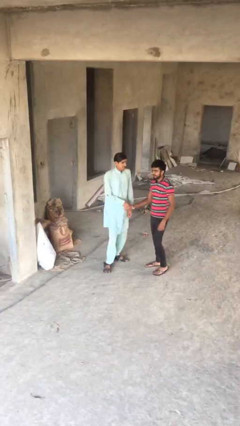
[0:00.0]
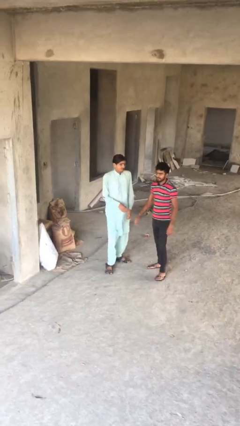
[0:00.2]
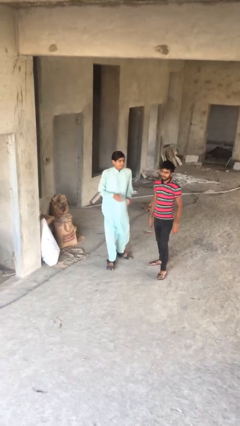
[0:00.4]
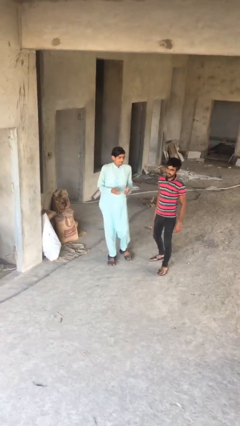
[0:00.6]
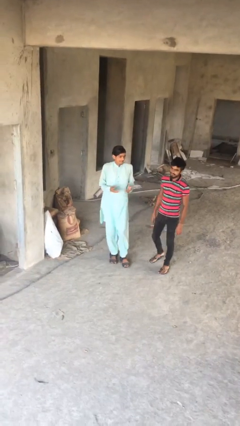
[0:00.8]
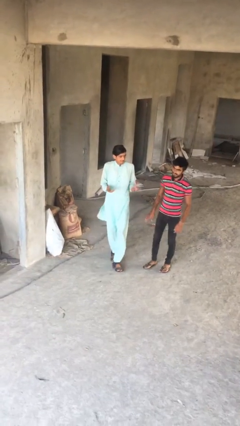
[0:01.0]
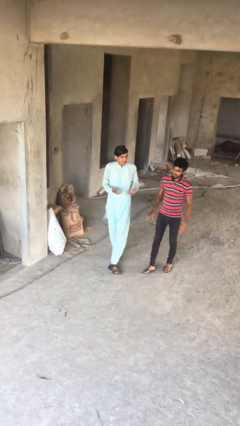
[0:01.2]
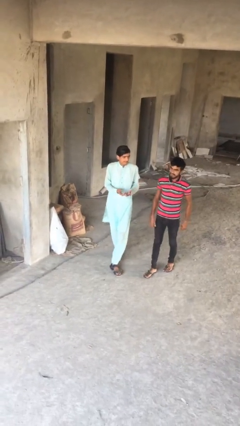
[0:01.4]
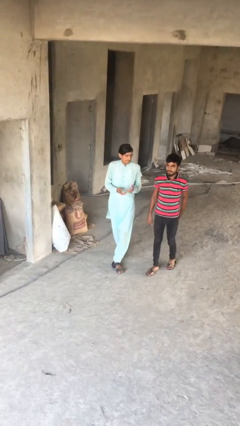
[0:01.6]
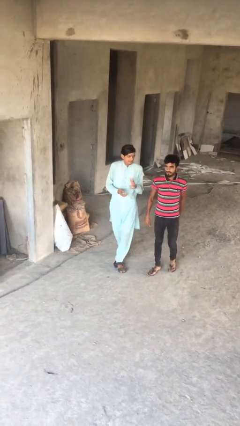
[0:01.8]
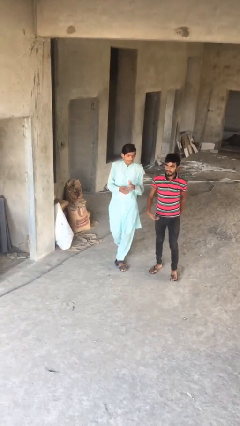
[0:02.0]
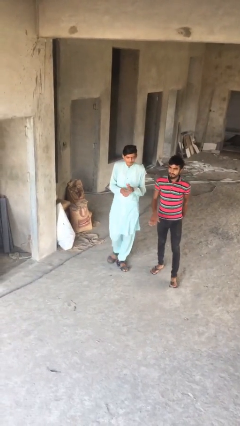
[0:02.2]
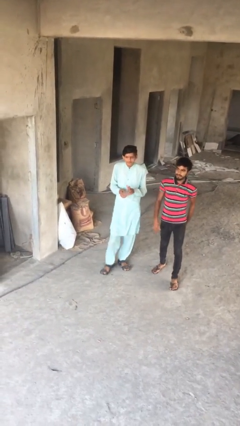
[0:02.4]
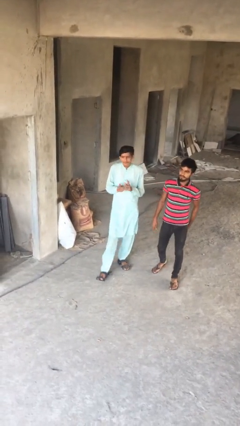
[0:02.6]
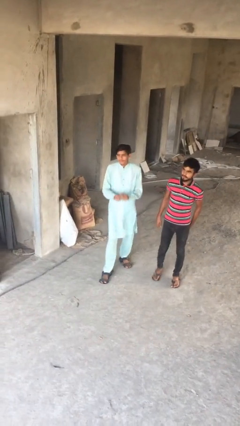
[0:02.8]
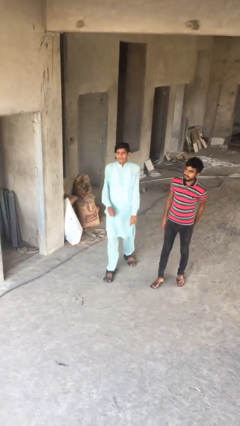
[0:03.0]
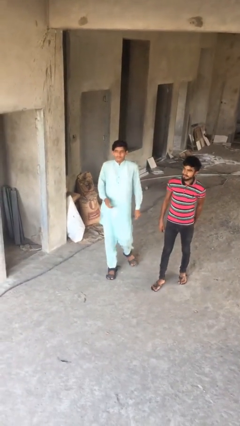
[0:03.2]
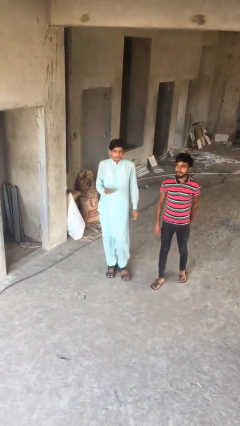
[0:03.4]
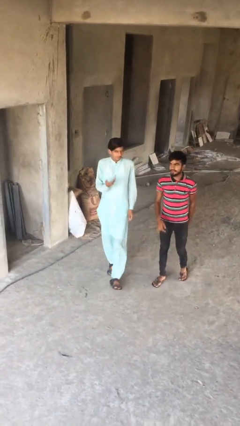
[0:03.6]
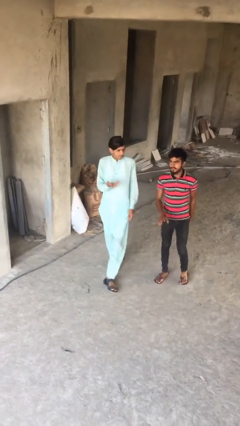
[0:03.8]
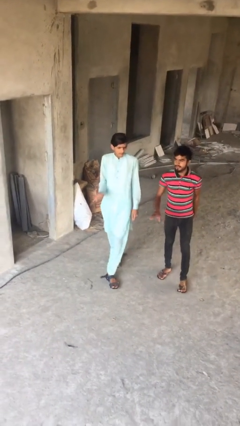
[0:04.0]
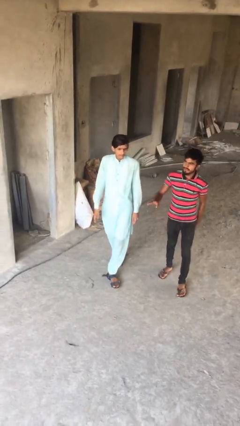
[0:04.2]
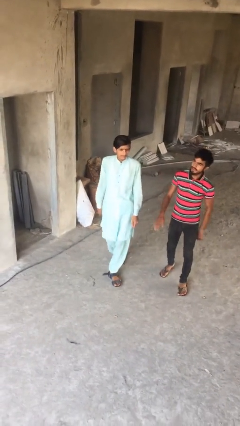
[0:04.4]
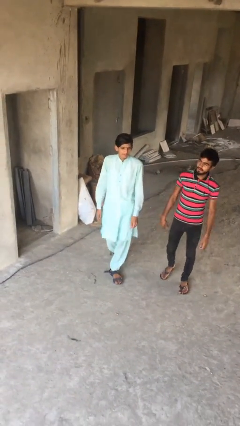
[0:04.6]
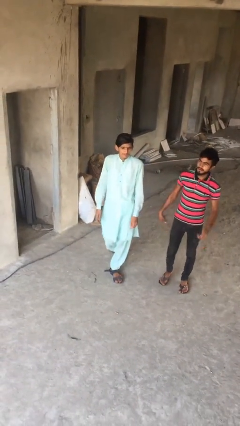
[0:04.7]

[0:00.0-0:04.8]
person talks to person

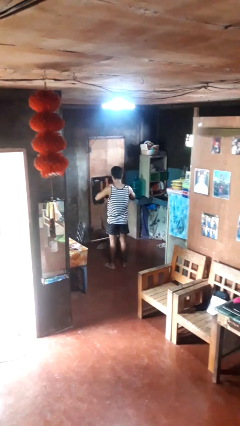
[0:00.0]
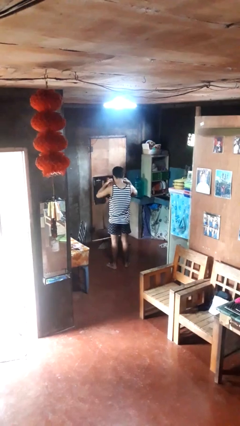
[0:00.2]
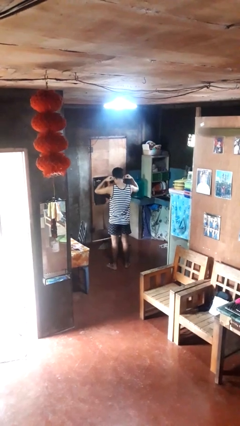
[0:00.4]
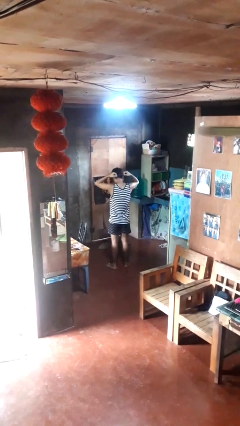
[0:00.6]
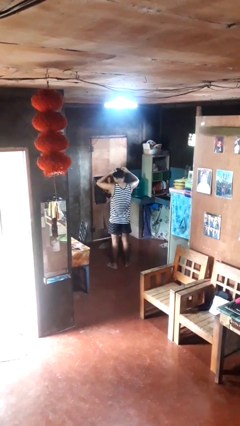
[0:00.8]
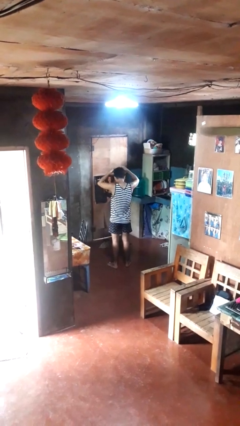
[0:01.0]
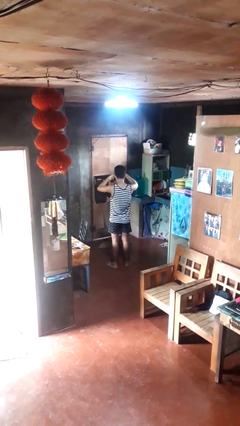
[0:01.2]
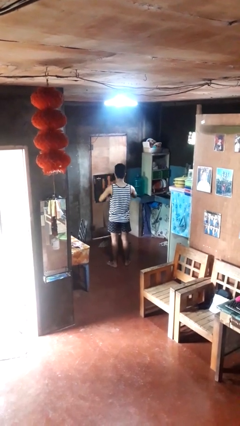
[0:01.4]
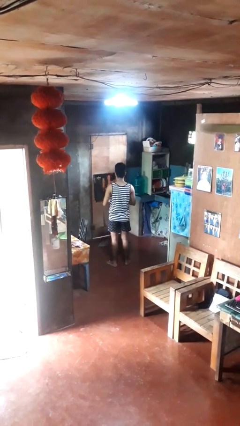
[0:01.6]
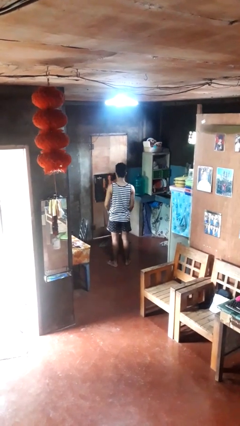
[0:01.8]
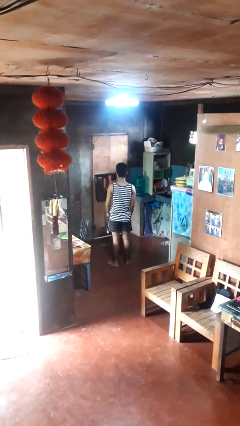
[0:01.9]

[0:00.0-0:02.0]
person takes off necklace

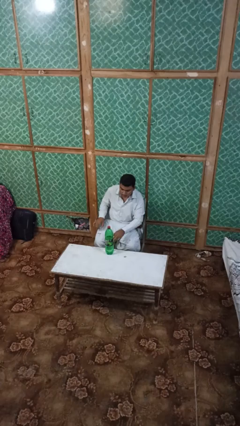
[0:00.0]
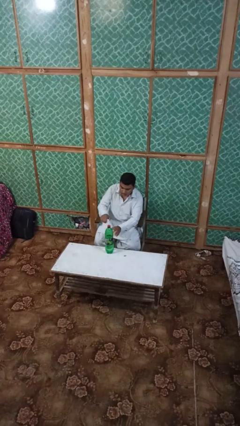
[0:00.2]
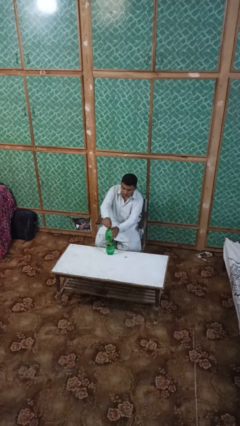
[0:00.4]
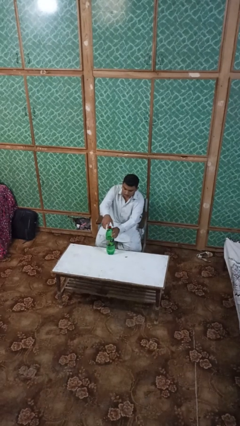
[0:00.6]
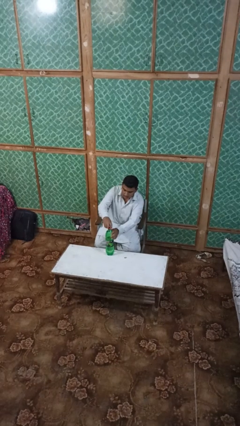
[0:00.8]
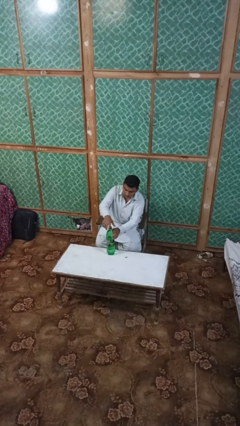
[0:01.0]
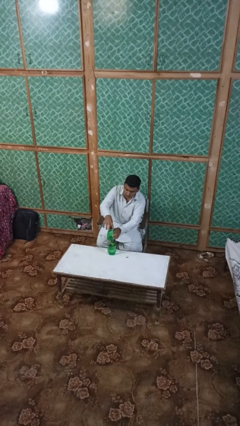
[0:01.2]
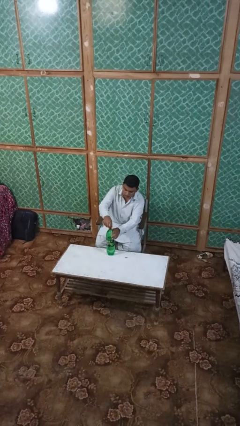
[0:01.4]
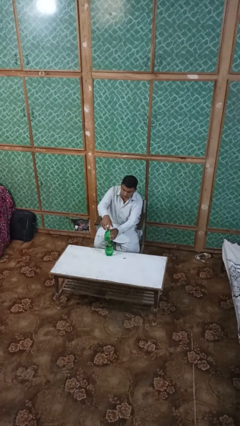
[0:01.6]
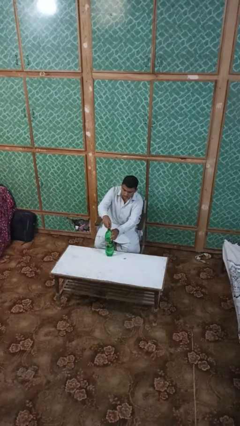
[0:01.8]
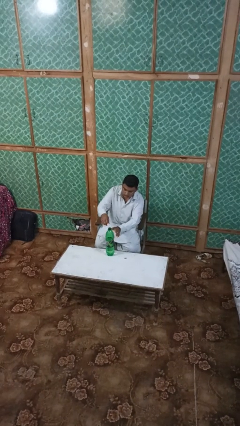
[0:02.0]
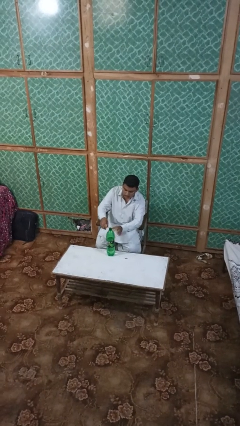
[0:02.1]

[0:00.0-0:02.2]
person unscrews lid from bottle

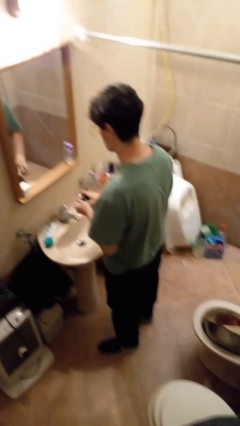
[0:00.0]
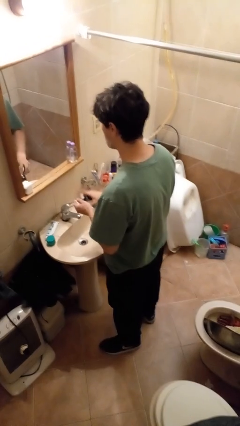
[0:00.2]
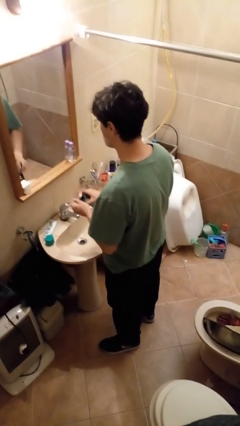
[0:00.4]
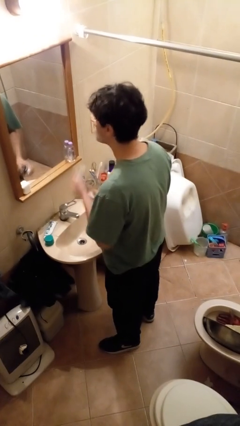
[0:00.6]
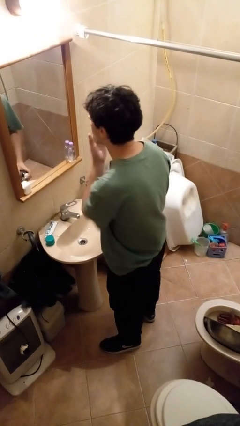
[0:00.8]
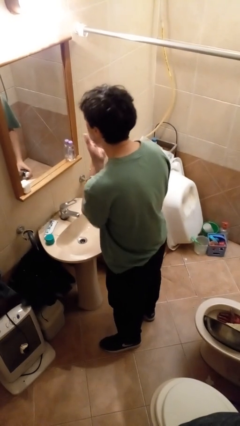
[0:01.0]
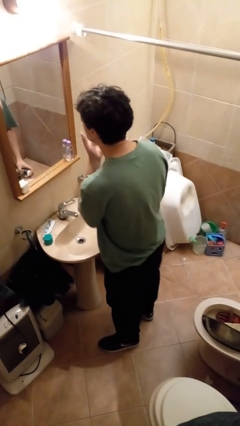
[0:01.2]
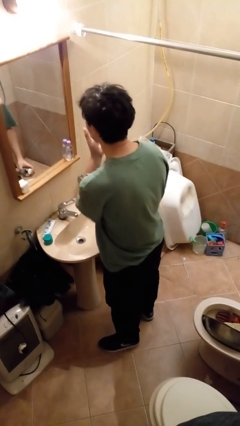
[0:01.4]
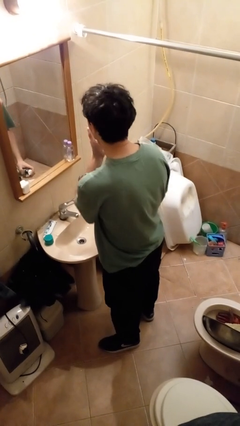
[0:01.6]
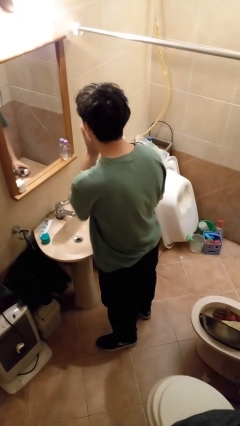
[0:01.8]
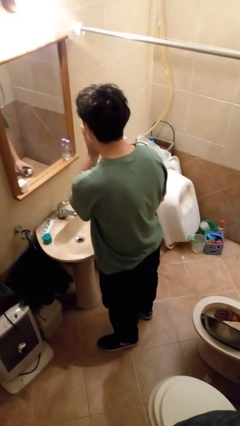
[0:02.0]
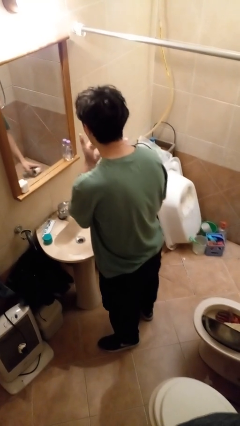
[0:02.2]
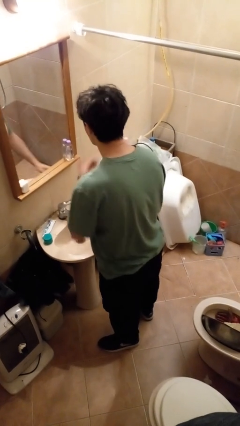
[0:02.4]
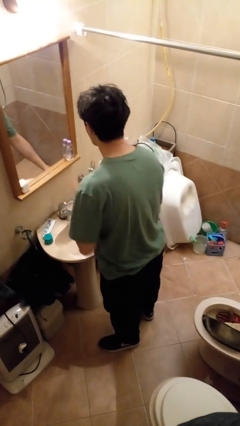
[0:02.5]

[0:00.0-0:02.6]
person applies shaving cream

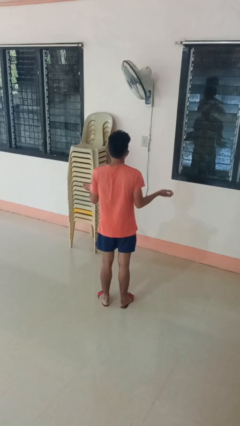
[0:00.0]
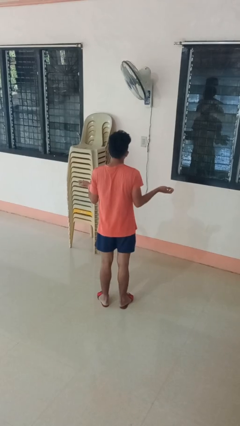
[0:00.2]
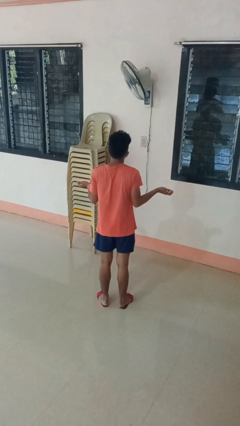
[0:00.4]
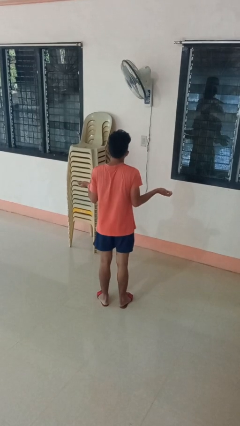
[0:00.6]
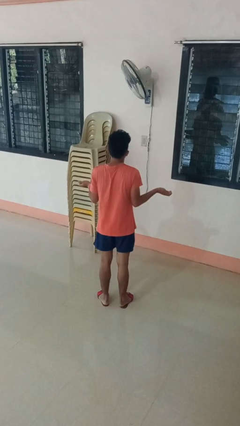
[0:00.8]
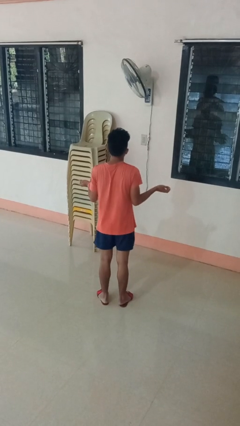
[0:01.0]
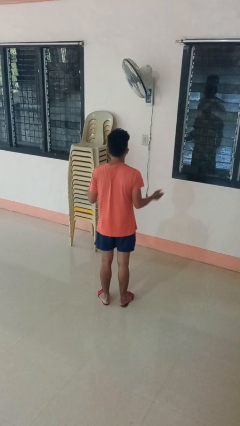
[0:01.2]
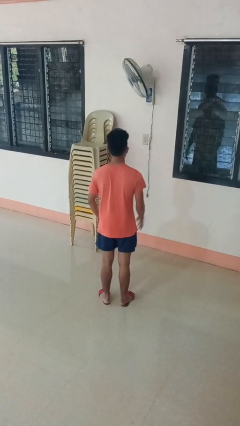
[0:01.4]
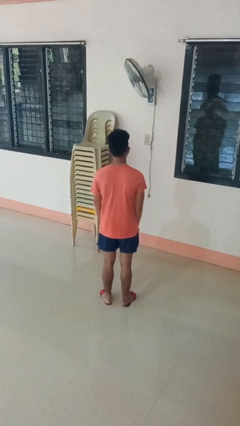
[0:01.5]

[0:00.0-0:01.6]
person shrugs

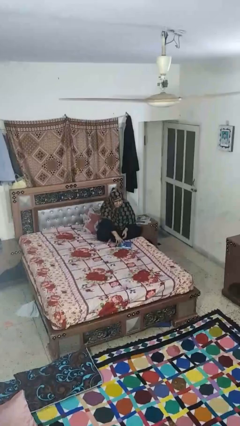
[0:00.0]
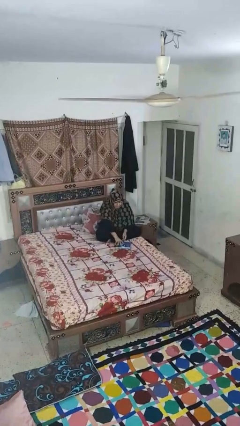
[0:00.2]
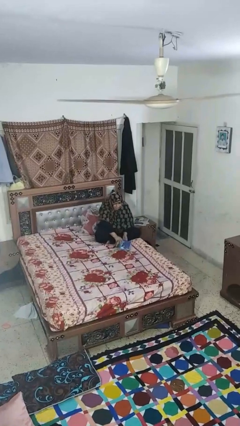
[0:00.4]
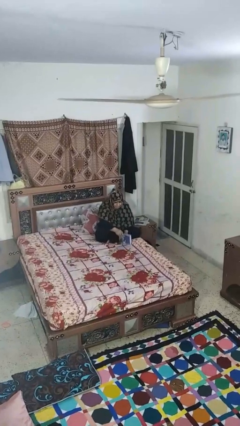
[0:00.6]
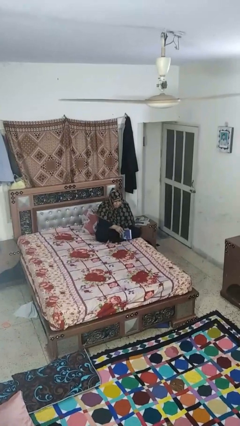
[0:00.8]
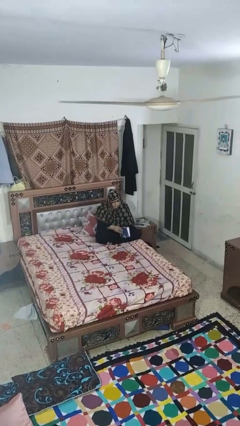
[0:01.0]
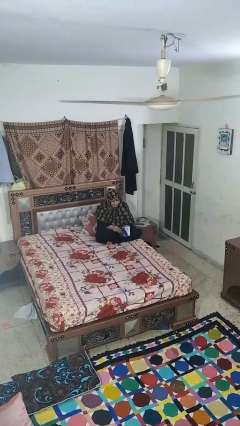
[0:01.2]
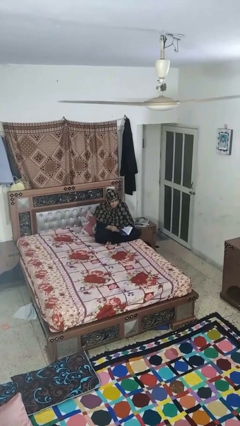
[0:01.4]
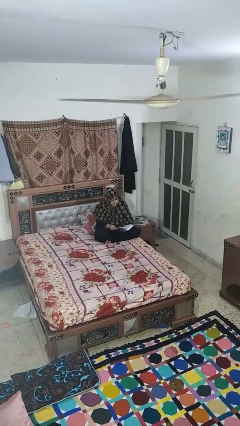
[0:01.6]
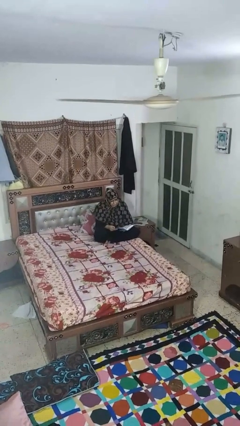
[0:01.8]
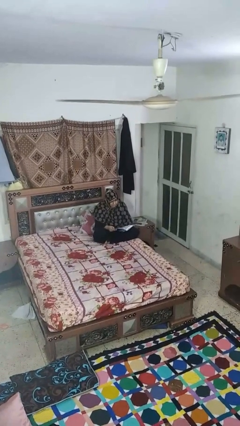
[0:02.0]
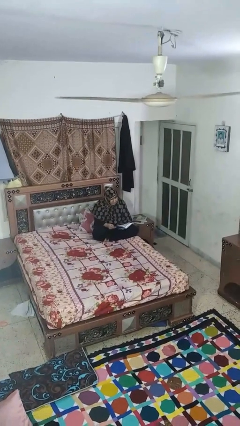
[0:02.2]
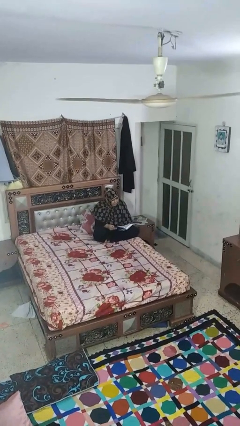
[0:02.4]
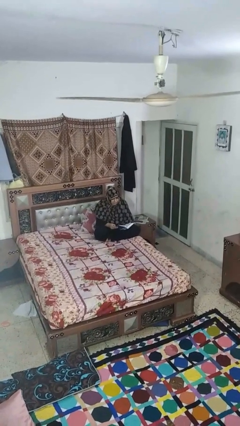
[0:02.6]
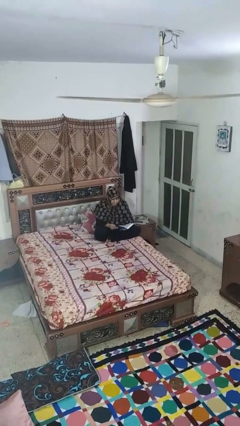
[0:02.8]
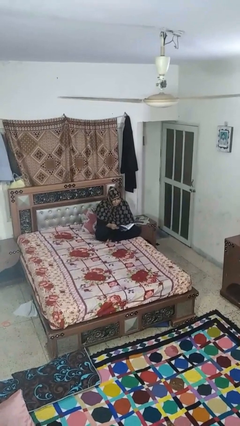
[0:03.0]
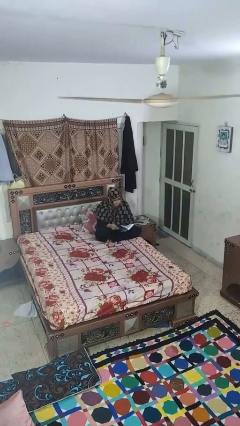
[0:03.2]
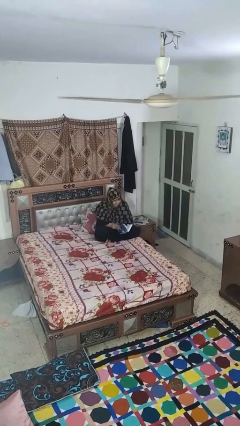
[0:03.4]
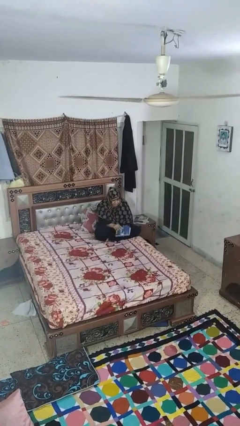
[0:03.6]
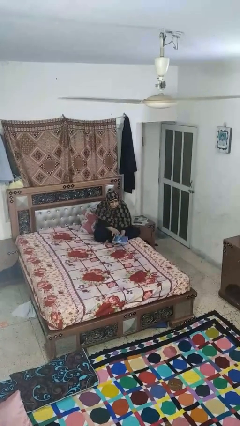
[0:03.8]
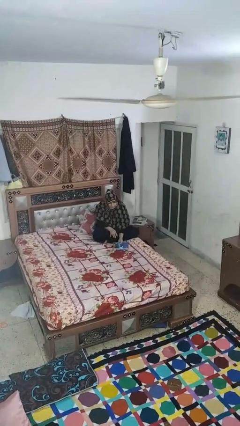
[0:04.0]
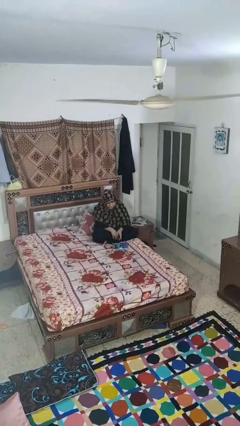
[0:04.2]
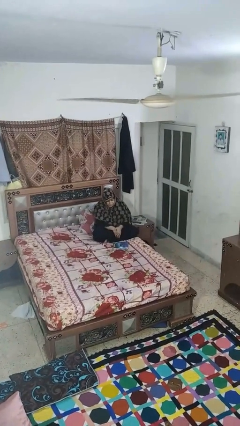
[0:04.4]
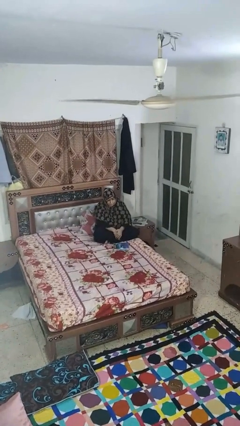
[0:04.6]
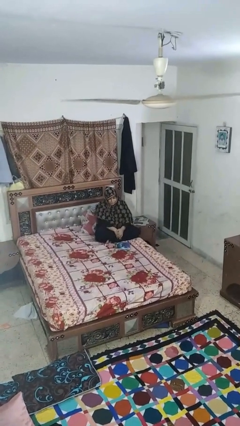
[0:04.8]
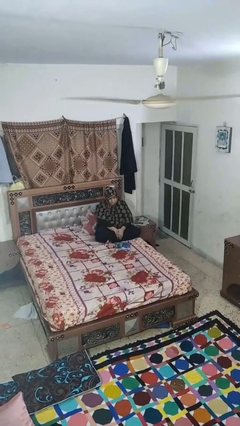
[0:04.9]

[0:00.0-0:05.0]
person reads book
